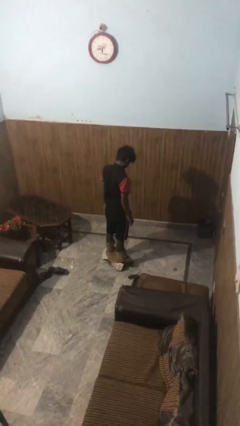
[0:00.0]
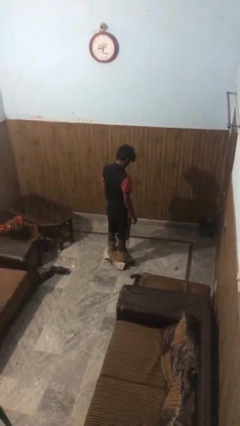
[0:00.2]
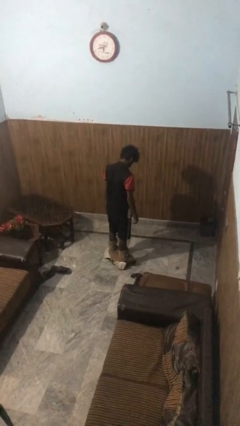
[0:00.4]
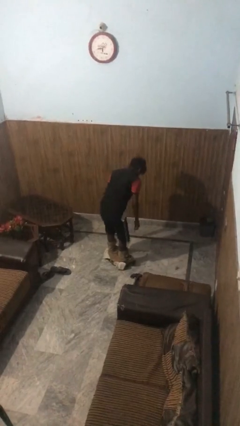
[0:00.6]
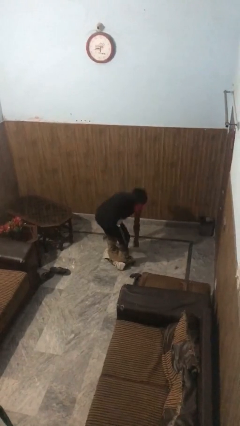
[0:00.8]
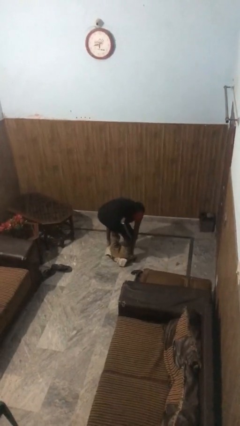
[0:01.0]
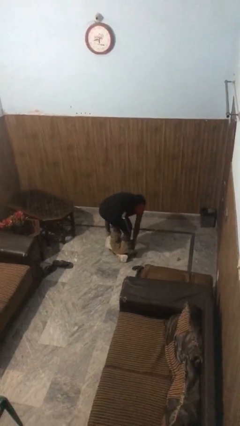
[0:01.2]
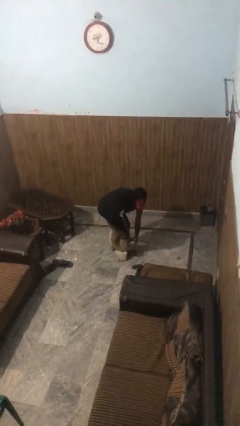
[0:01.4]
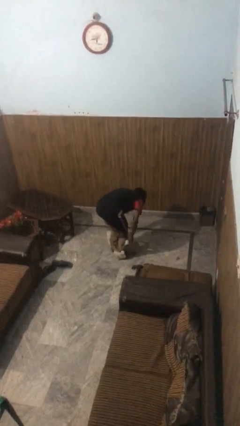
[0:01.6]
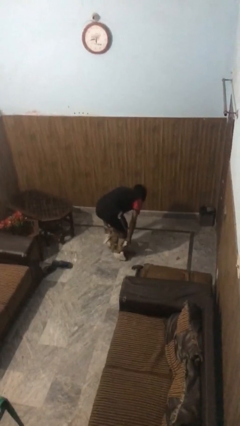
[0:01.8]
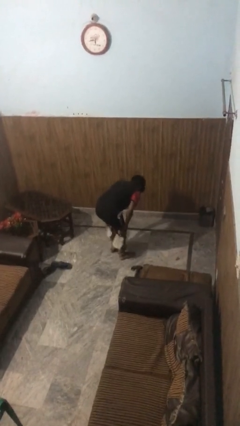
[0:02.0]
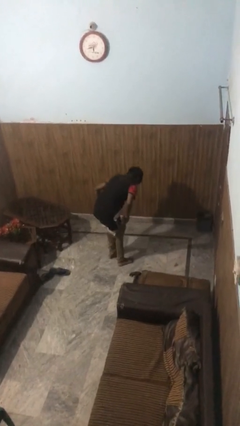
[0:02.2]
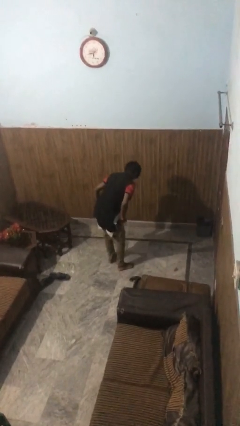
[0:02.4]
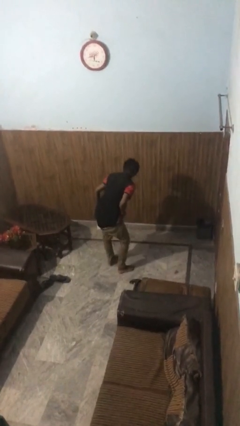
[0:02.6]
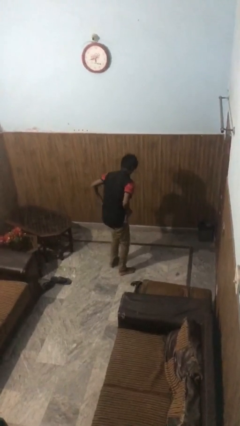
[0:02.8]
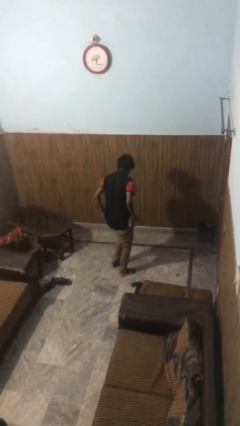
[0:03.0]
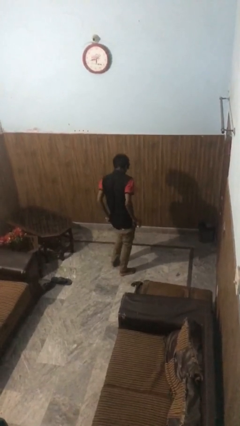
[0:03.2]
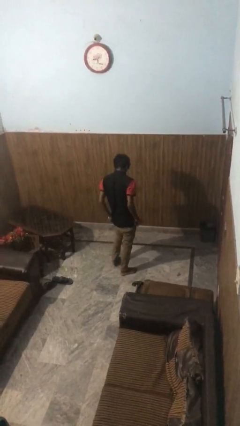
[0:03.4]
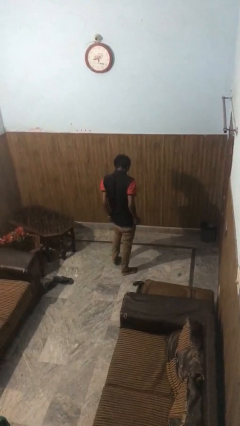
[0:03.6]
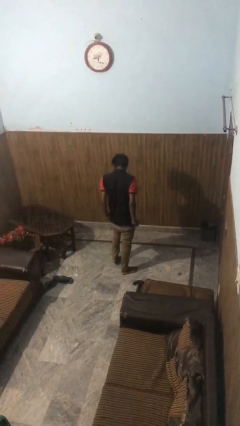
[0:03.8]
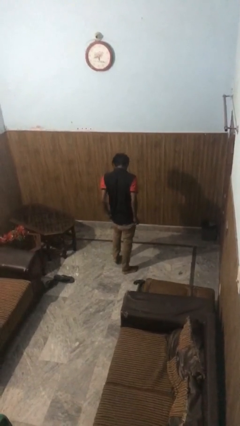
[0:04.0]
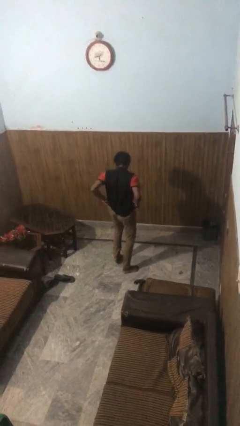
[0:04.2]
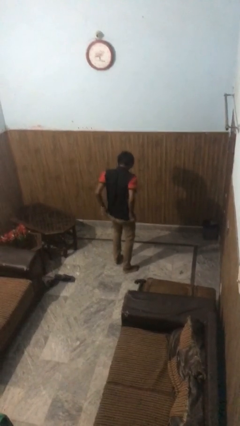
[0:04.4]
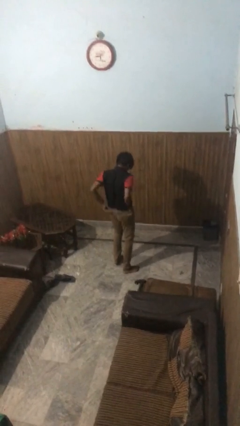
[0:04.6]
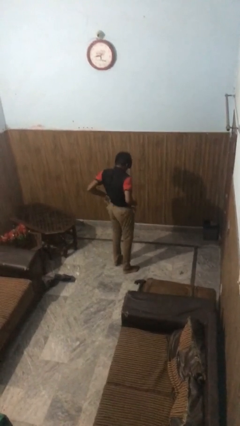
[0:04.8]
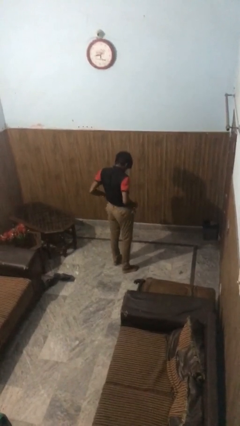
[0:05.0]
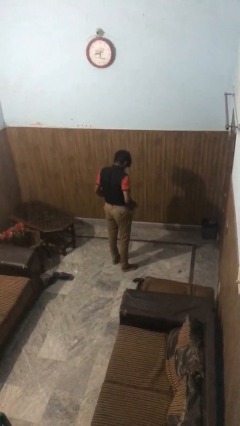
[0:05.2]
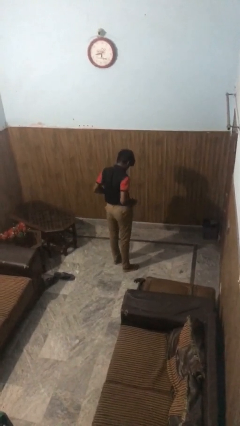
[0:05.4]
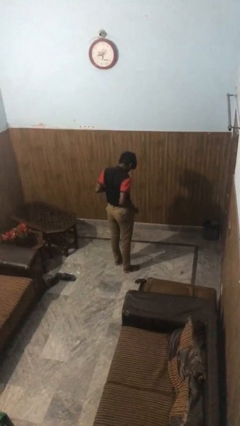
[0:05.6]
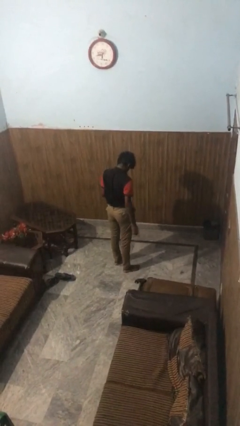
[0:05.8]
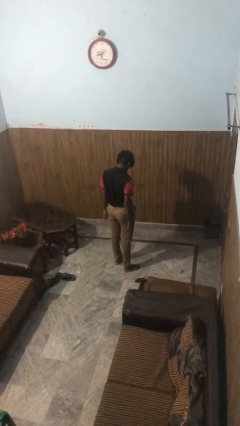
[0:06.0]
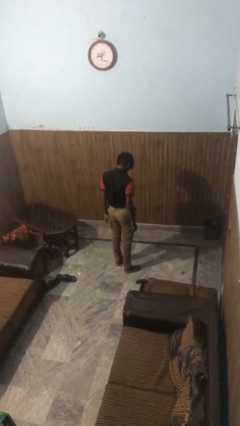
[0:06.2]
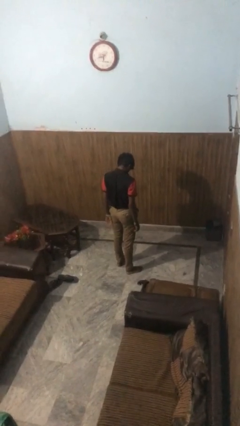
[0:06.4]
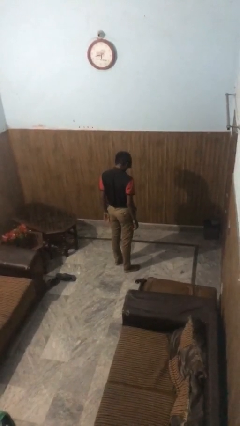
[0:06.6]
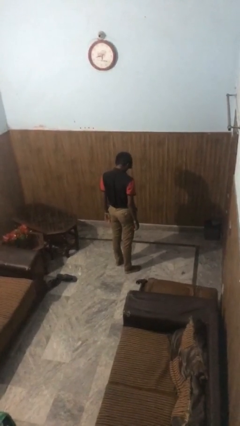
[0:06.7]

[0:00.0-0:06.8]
person puts on pants

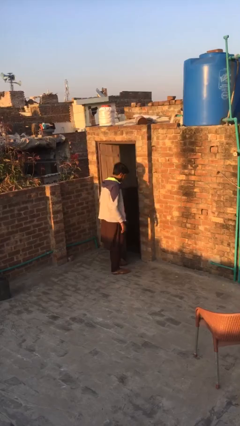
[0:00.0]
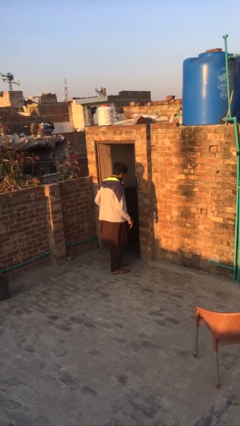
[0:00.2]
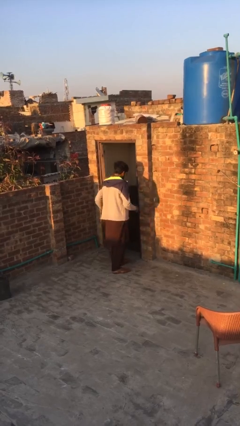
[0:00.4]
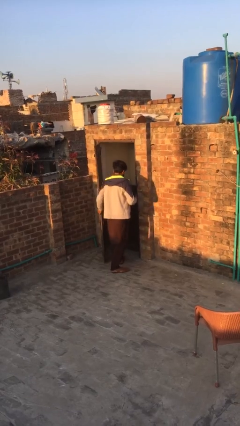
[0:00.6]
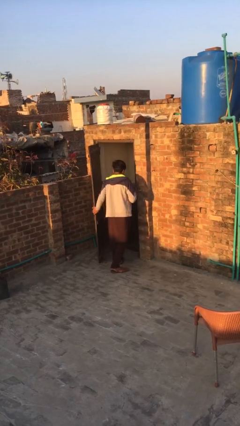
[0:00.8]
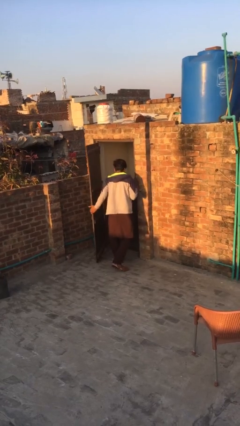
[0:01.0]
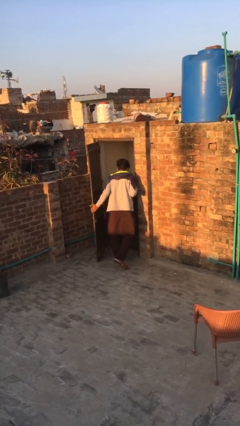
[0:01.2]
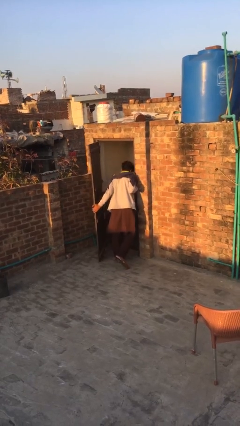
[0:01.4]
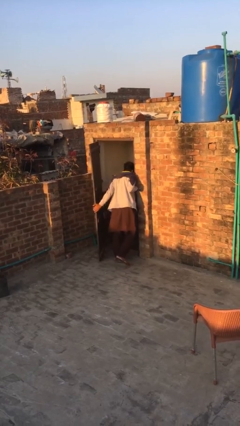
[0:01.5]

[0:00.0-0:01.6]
person opens facility door

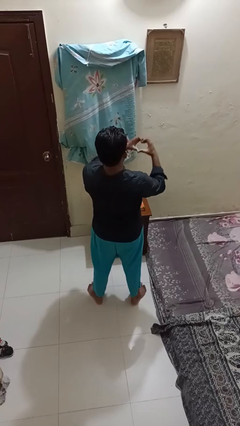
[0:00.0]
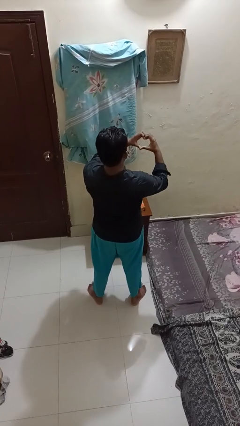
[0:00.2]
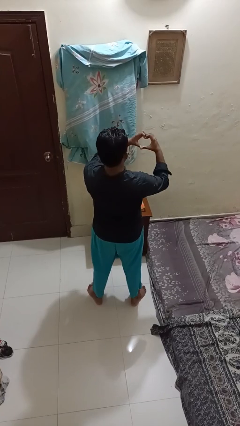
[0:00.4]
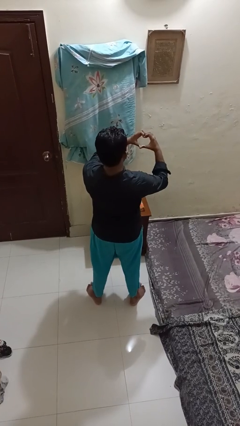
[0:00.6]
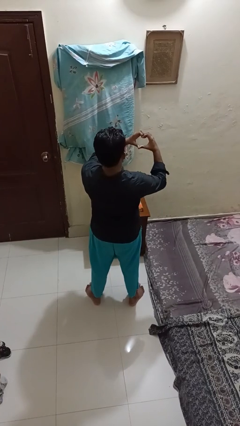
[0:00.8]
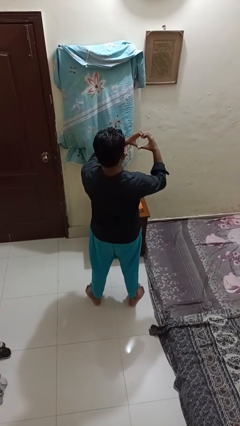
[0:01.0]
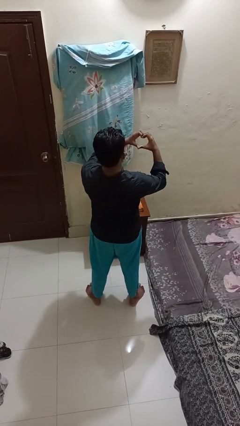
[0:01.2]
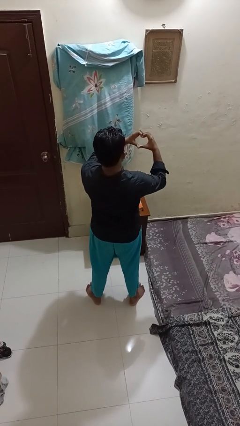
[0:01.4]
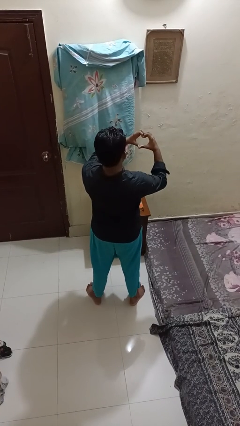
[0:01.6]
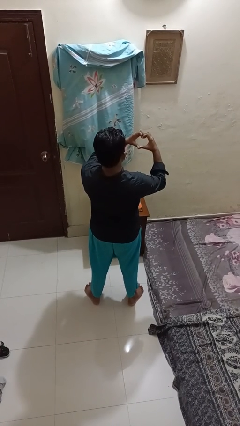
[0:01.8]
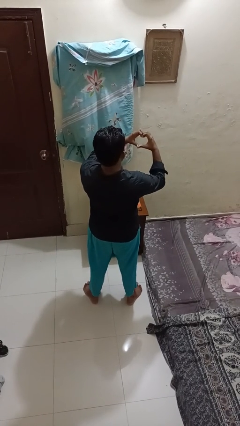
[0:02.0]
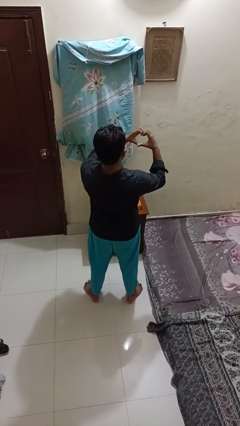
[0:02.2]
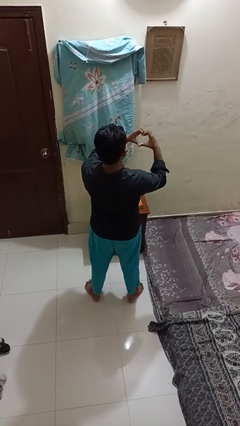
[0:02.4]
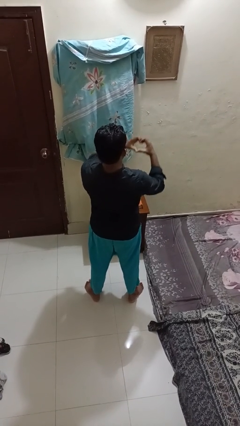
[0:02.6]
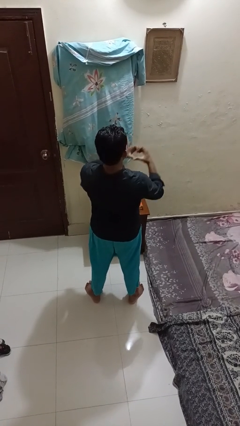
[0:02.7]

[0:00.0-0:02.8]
person gestures heart

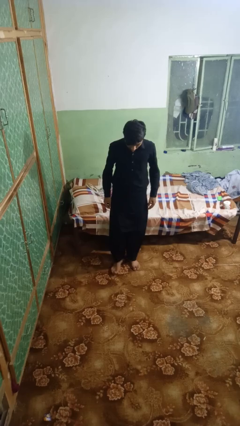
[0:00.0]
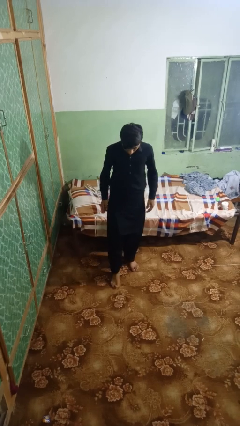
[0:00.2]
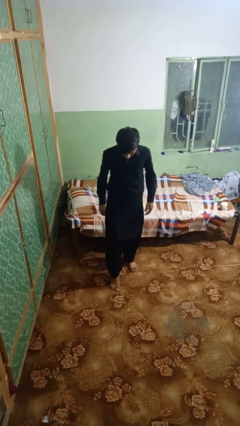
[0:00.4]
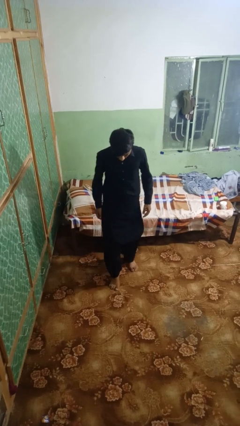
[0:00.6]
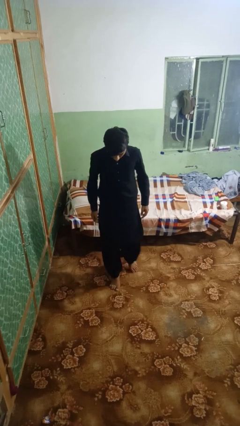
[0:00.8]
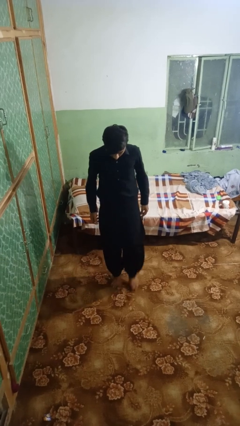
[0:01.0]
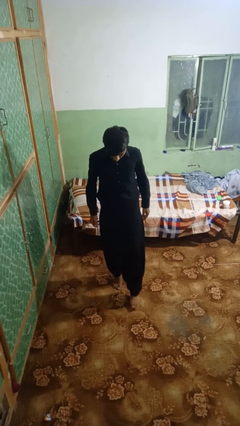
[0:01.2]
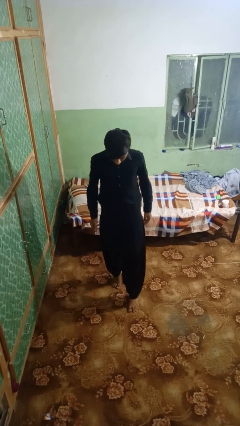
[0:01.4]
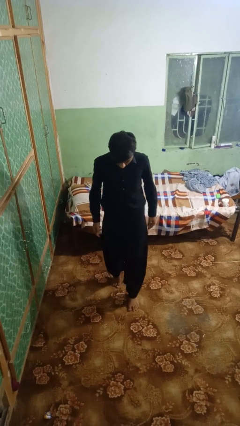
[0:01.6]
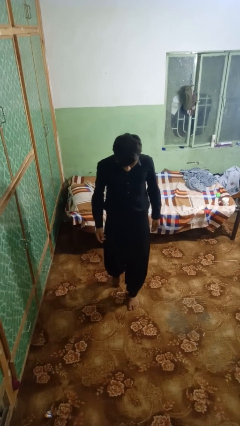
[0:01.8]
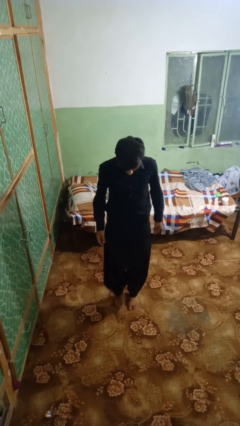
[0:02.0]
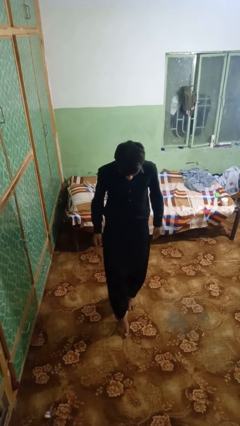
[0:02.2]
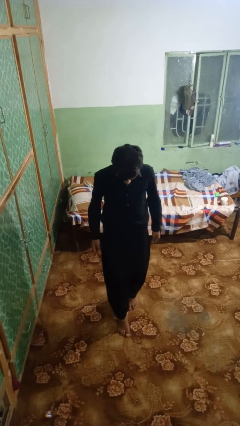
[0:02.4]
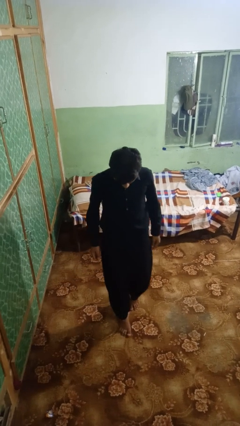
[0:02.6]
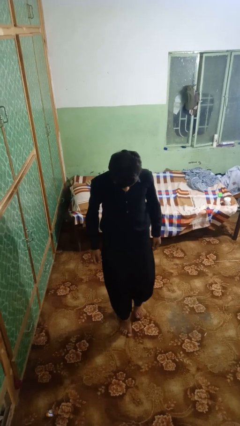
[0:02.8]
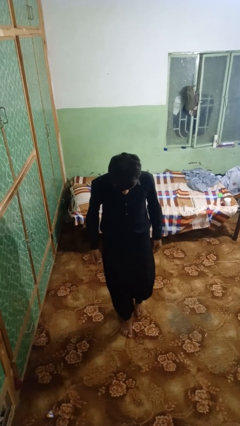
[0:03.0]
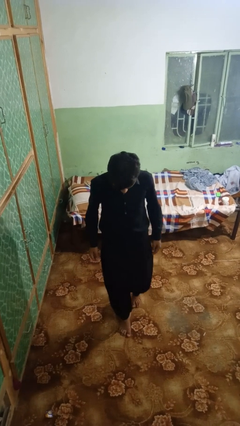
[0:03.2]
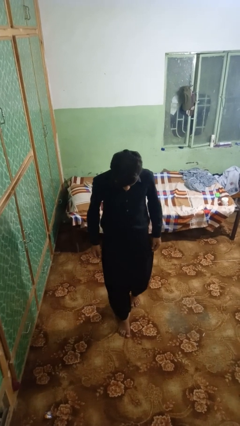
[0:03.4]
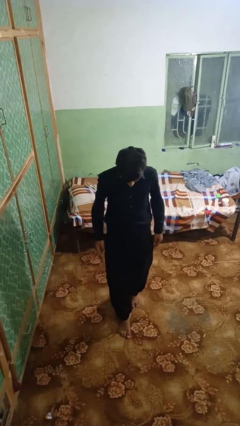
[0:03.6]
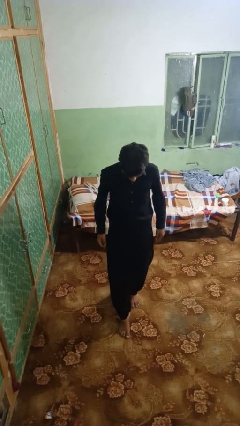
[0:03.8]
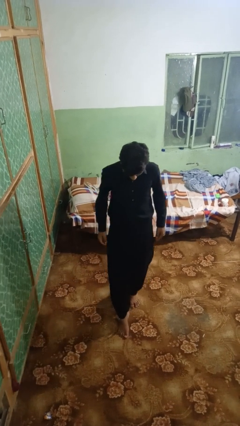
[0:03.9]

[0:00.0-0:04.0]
person walks tiptoe

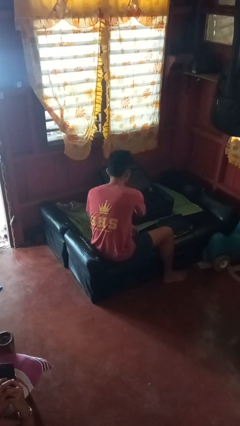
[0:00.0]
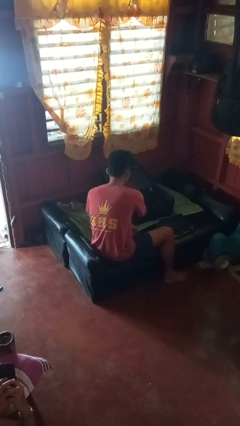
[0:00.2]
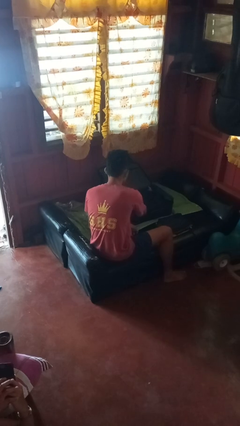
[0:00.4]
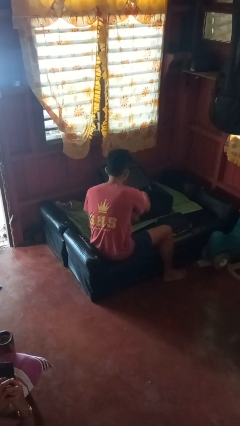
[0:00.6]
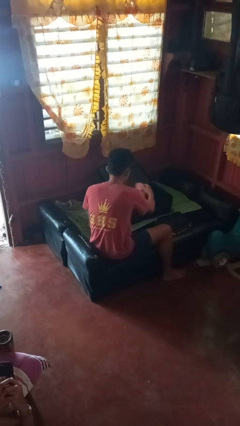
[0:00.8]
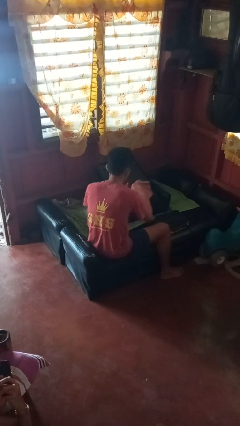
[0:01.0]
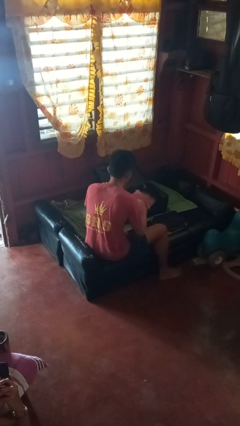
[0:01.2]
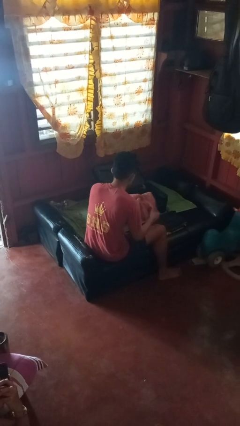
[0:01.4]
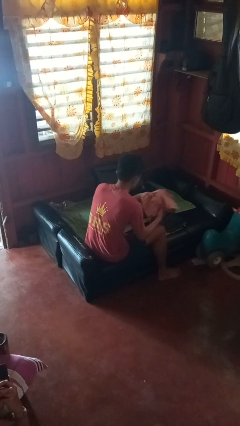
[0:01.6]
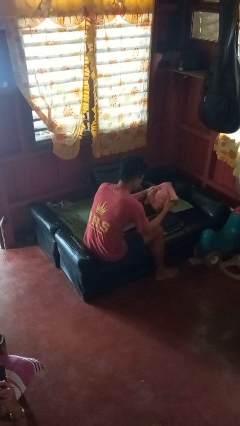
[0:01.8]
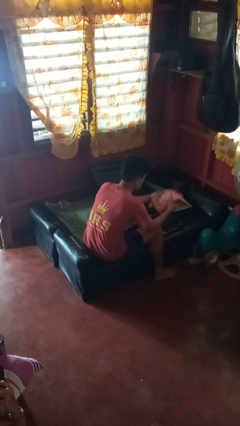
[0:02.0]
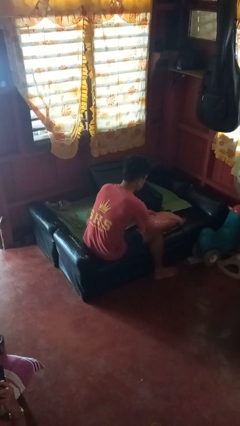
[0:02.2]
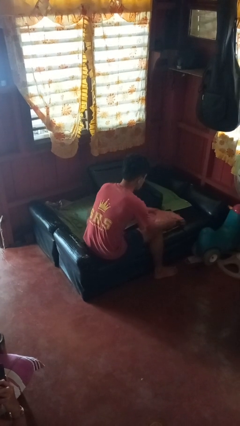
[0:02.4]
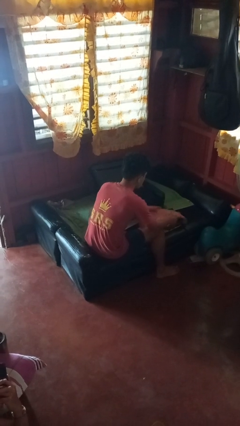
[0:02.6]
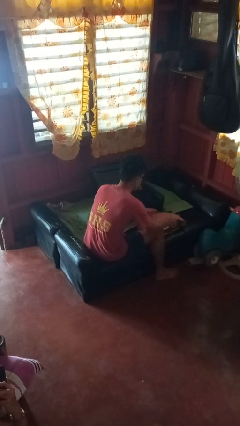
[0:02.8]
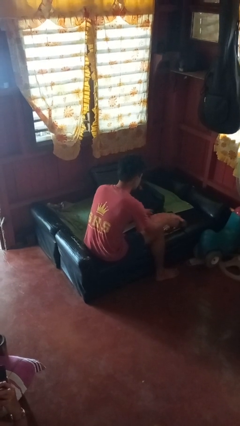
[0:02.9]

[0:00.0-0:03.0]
person unloads clothes from suitcase
